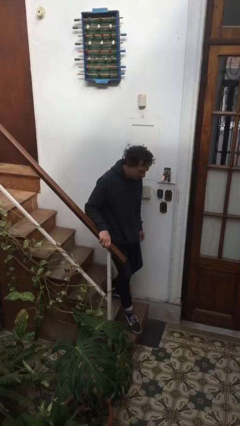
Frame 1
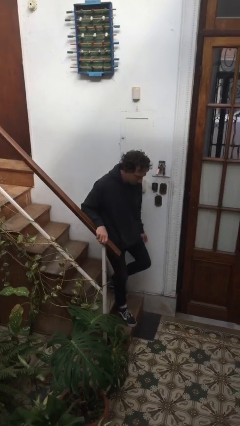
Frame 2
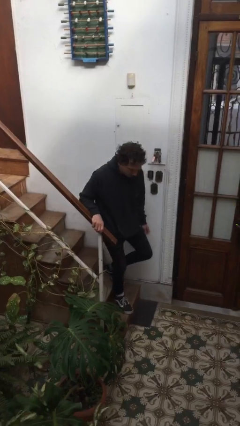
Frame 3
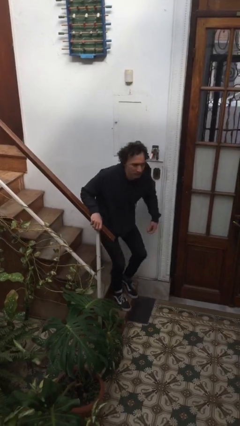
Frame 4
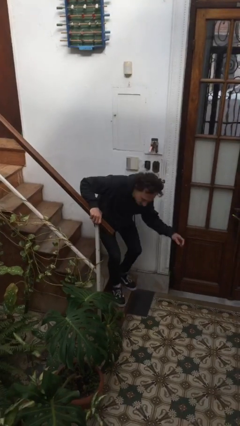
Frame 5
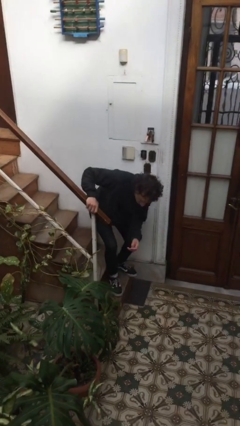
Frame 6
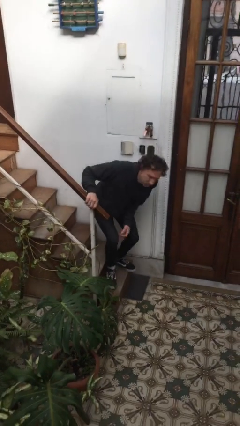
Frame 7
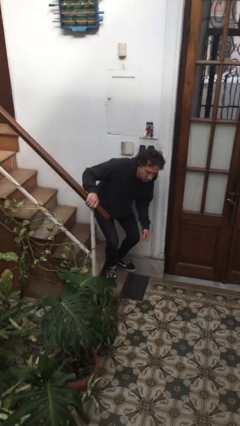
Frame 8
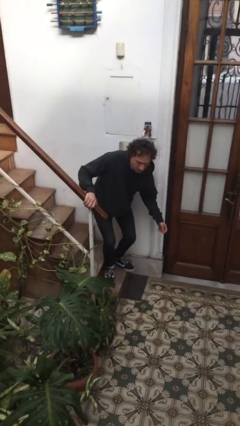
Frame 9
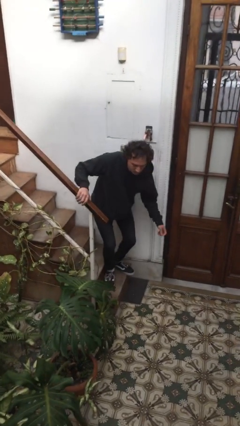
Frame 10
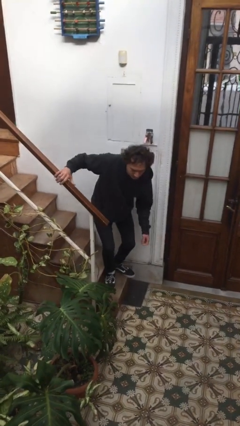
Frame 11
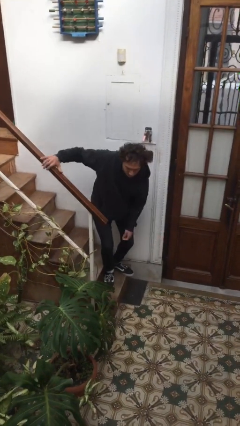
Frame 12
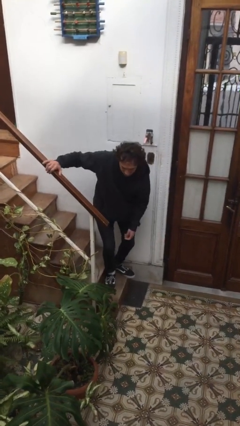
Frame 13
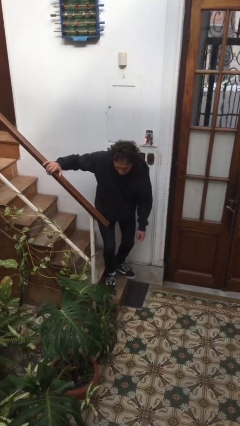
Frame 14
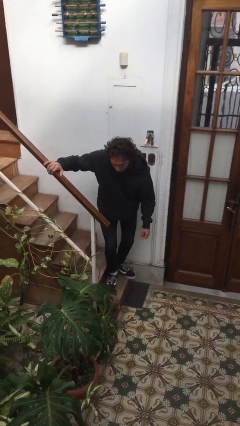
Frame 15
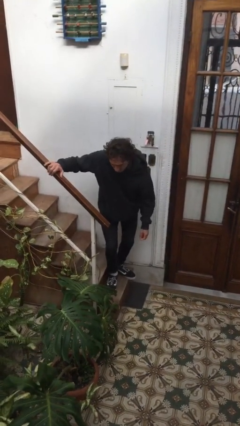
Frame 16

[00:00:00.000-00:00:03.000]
person trips on stair

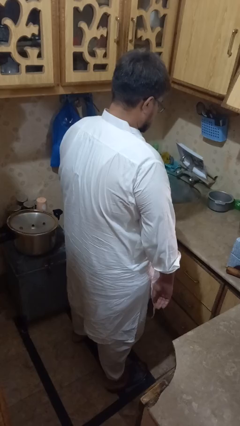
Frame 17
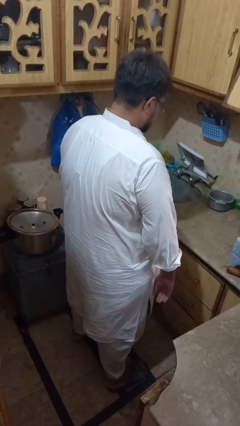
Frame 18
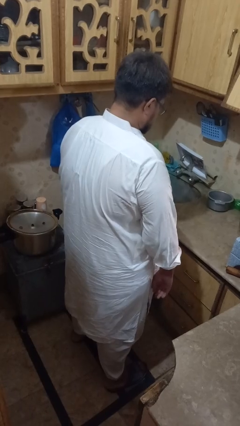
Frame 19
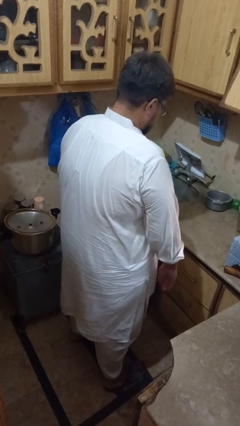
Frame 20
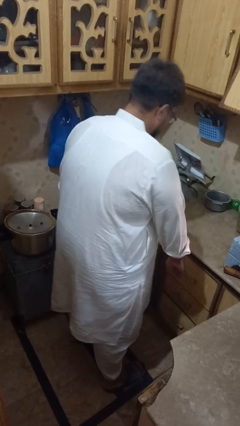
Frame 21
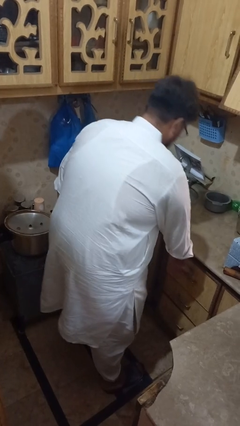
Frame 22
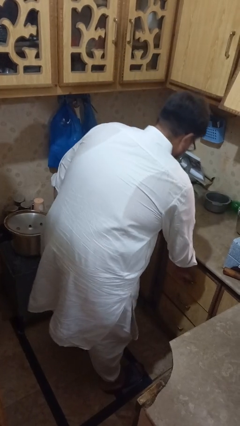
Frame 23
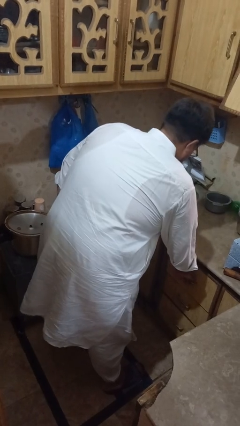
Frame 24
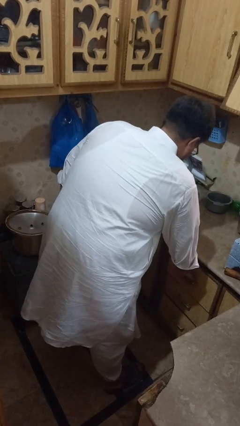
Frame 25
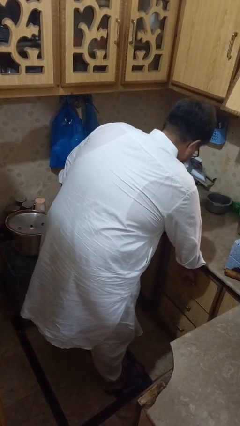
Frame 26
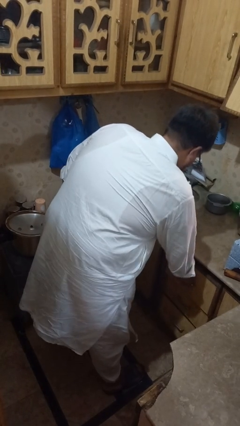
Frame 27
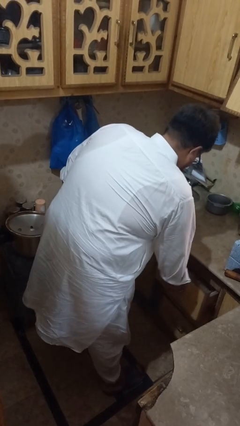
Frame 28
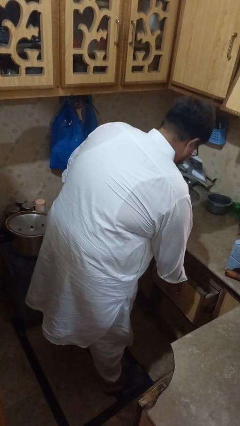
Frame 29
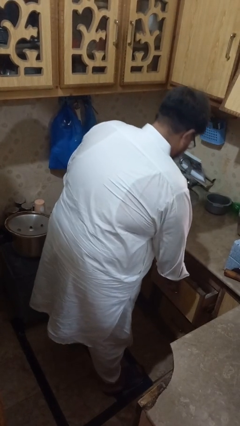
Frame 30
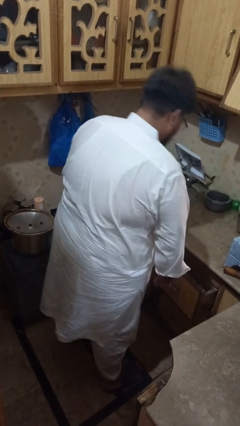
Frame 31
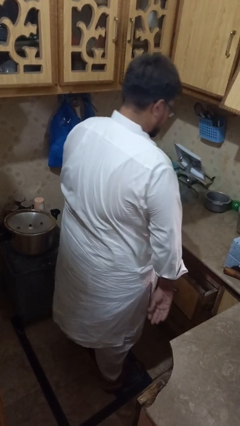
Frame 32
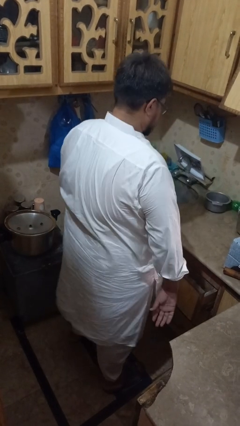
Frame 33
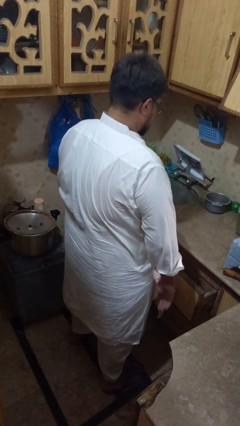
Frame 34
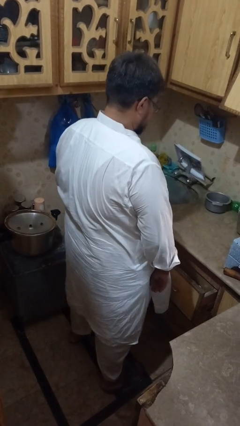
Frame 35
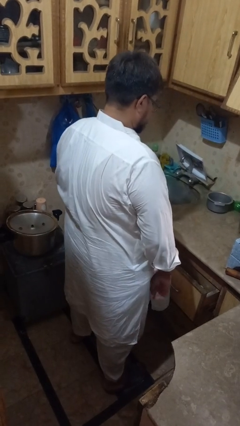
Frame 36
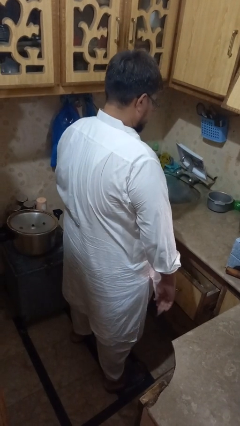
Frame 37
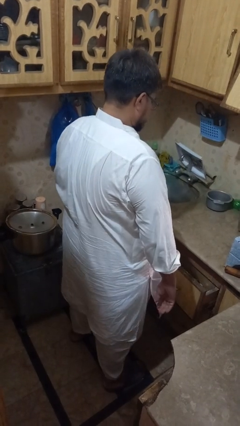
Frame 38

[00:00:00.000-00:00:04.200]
person opens kitchen drawer

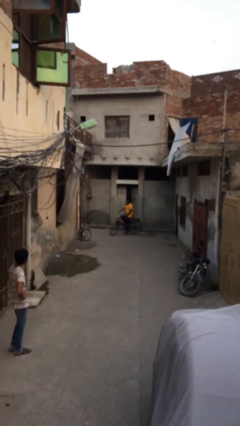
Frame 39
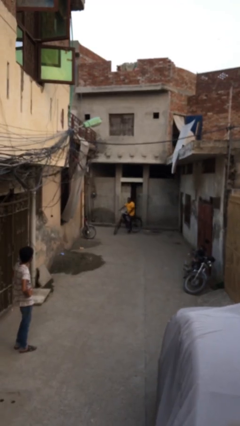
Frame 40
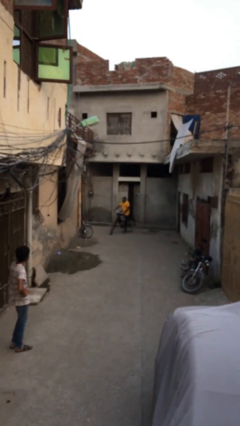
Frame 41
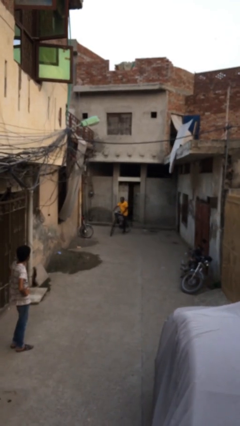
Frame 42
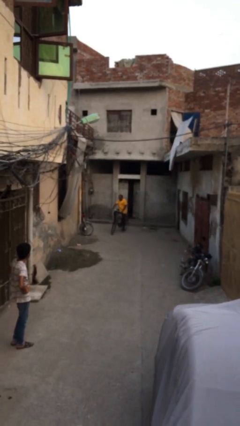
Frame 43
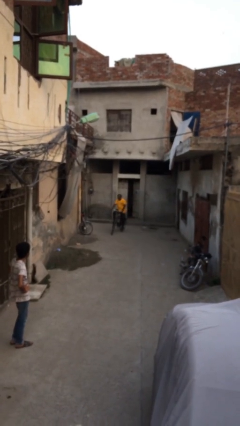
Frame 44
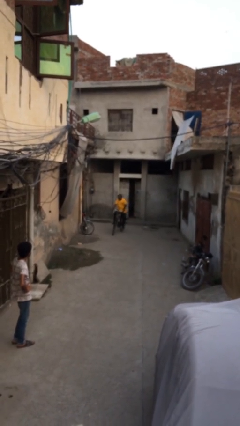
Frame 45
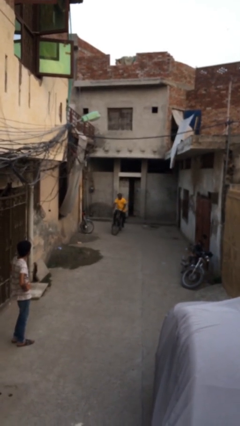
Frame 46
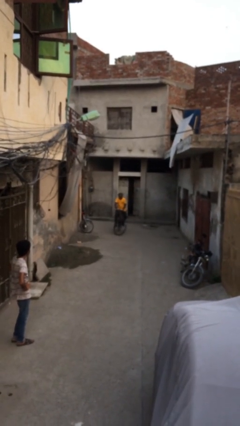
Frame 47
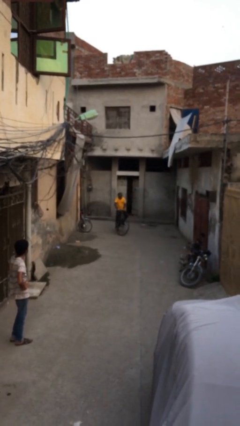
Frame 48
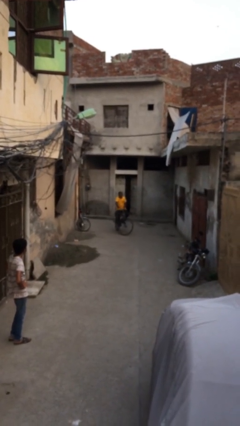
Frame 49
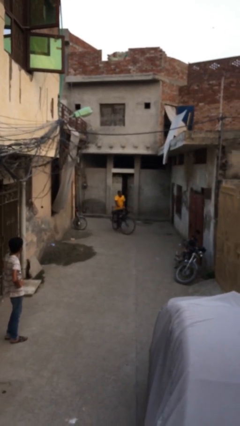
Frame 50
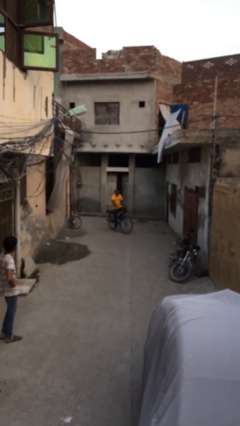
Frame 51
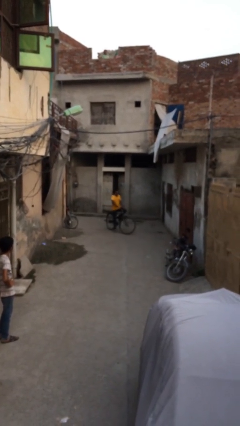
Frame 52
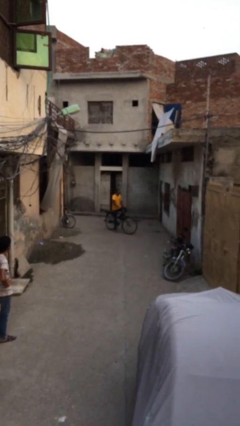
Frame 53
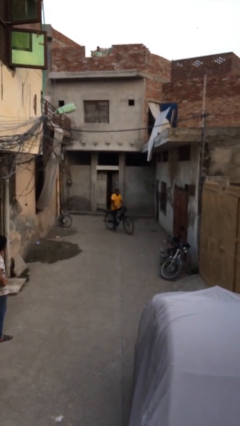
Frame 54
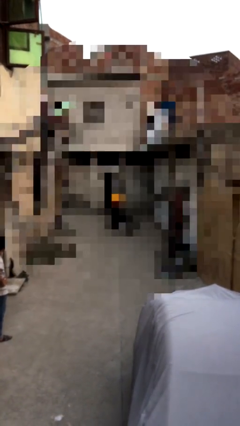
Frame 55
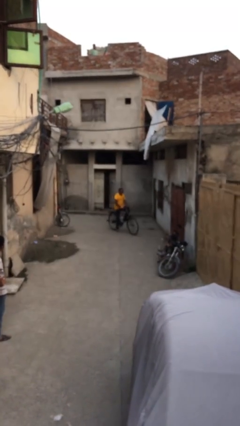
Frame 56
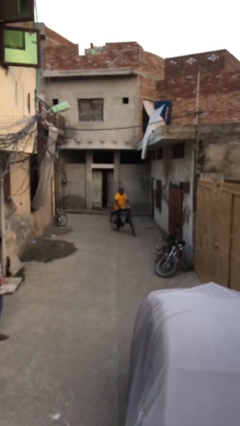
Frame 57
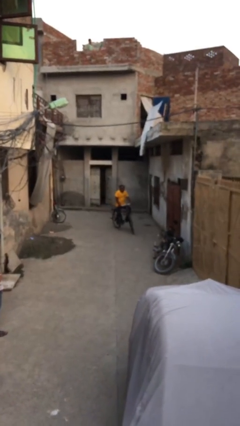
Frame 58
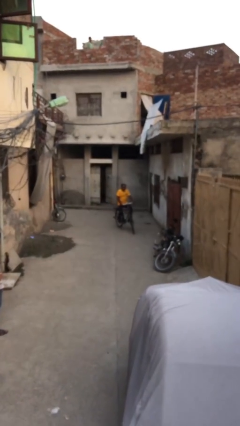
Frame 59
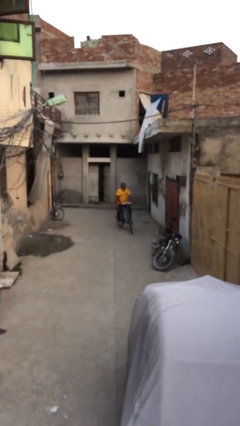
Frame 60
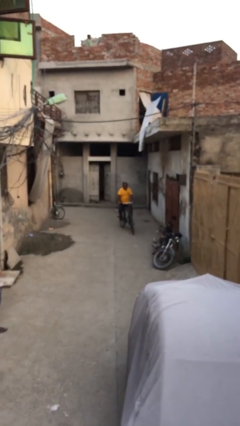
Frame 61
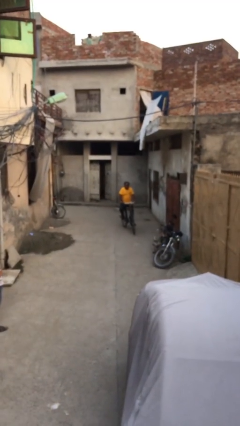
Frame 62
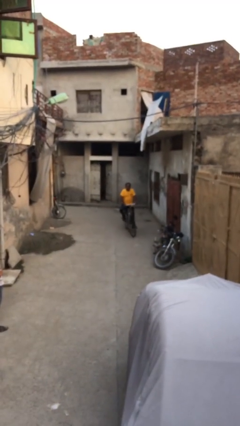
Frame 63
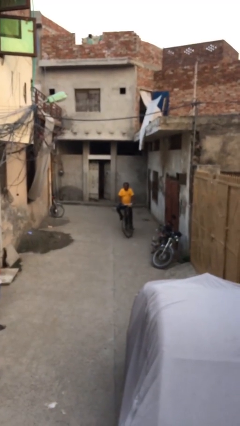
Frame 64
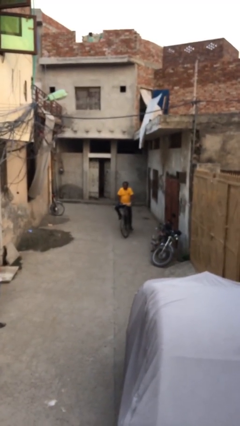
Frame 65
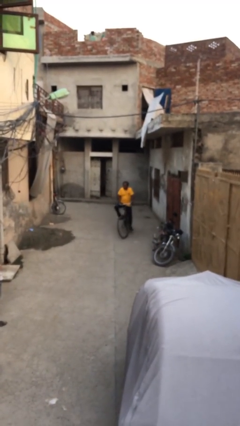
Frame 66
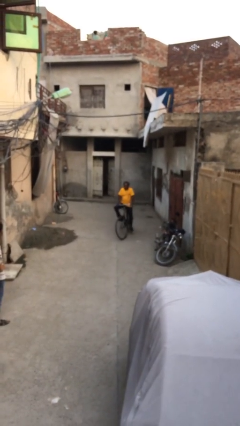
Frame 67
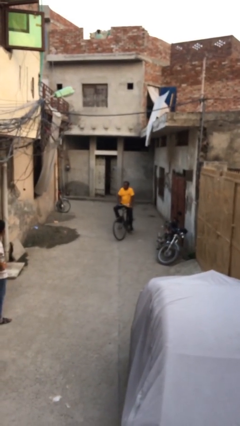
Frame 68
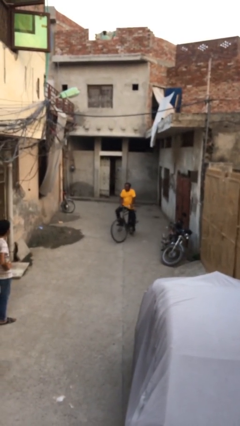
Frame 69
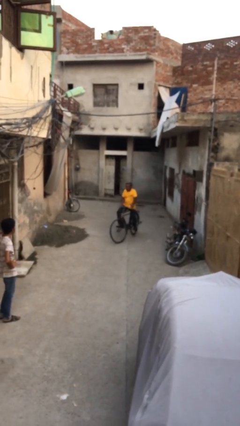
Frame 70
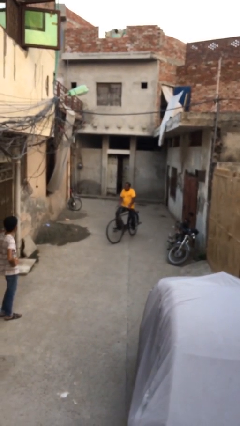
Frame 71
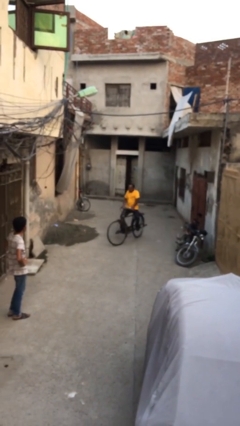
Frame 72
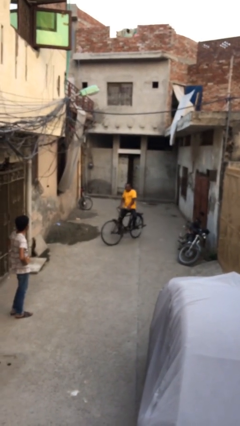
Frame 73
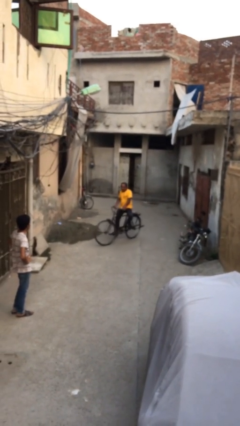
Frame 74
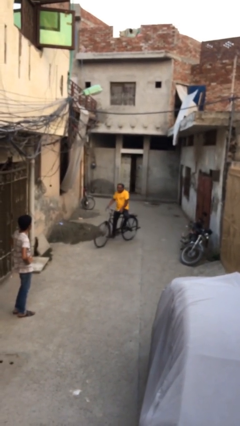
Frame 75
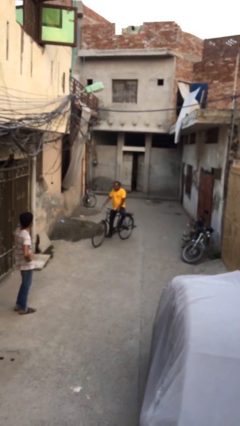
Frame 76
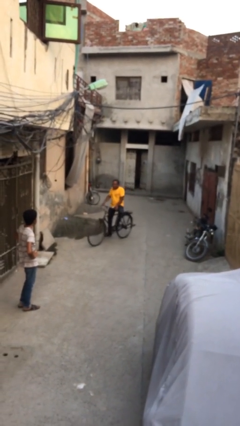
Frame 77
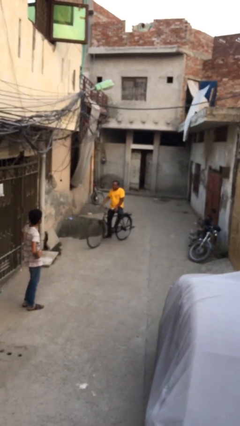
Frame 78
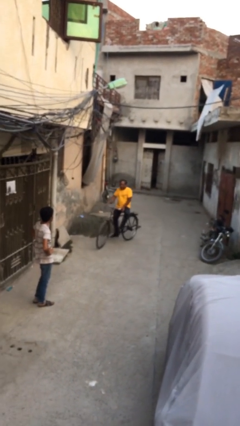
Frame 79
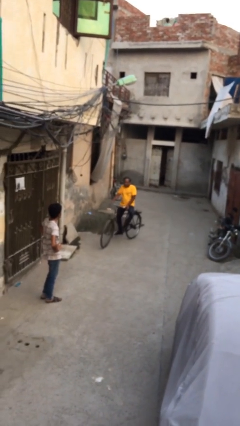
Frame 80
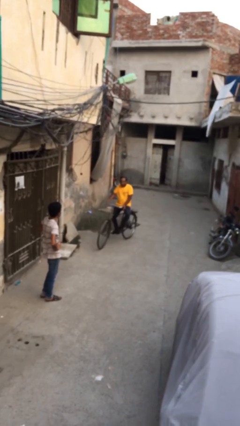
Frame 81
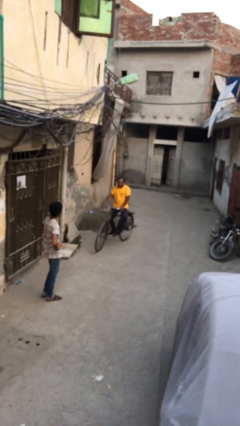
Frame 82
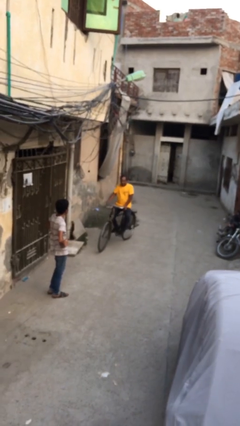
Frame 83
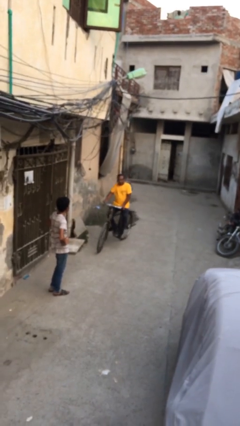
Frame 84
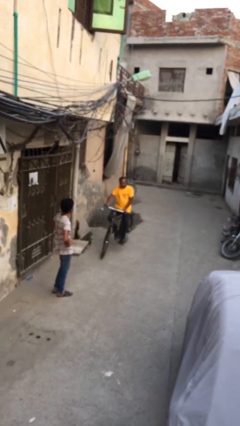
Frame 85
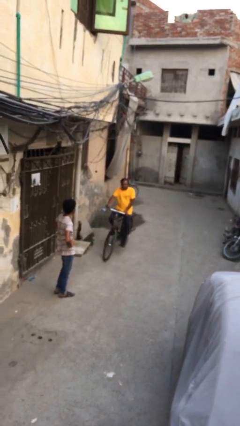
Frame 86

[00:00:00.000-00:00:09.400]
person rides bicycle

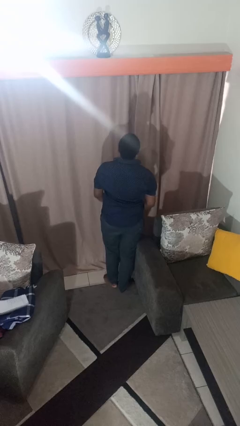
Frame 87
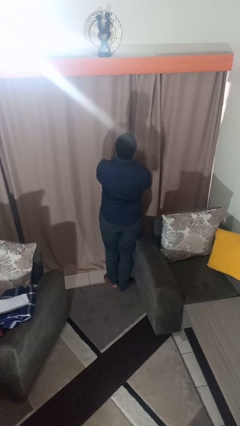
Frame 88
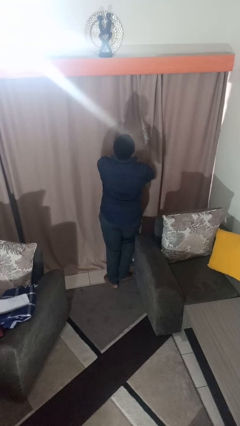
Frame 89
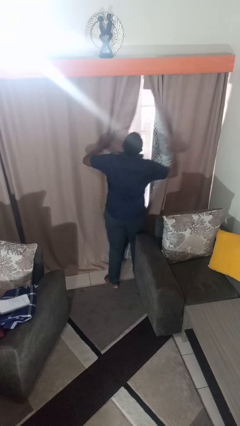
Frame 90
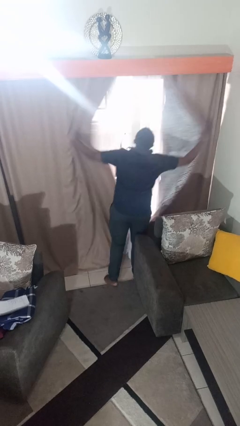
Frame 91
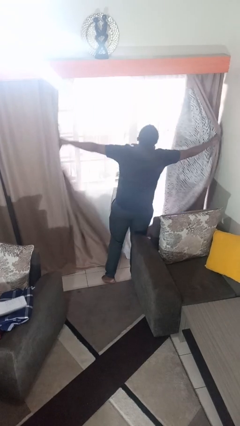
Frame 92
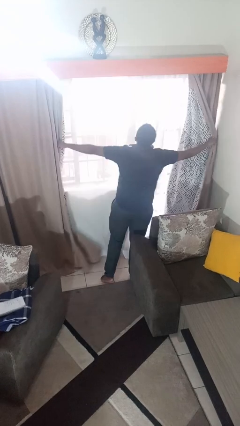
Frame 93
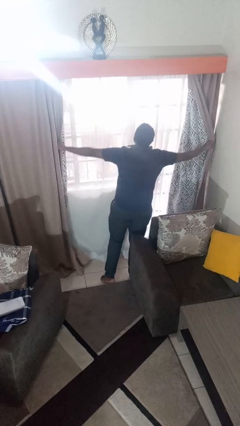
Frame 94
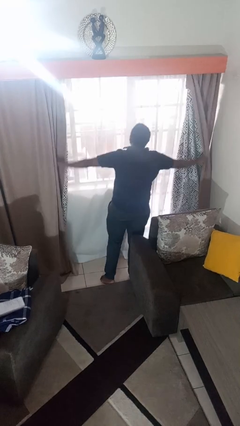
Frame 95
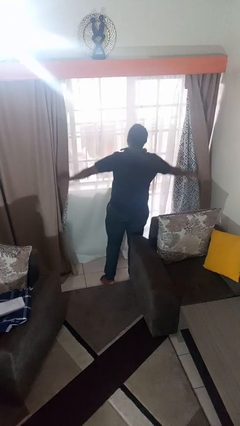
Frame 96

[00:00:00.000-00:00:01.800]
person opens curtains
